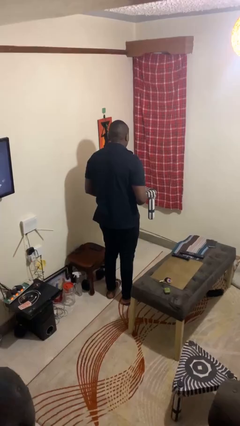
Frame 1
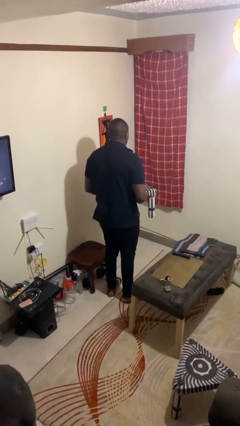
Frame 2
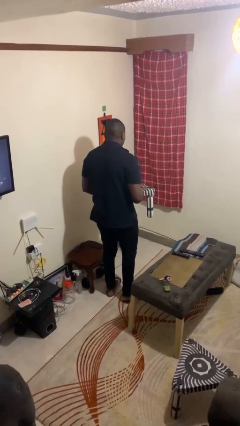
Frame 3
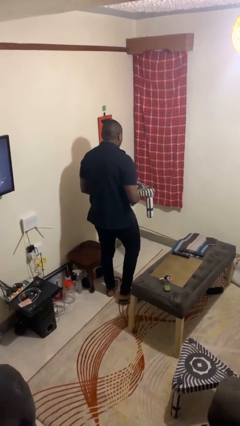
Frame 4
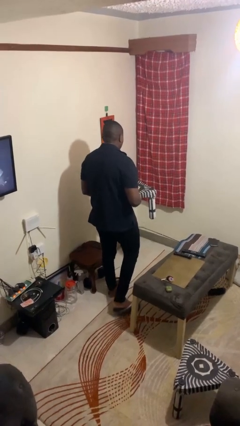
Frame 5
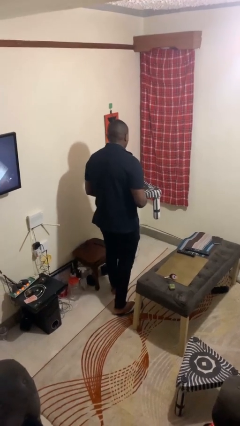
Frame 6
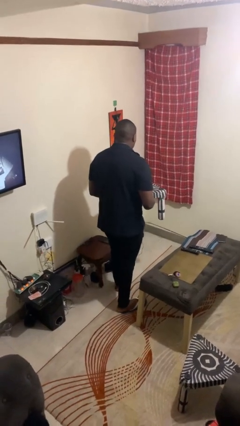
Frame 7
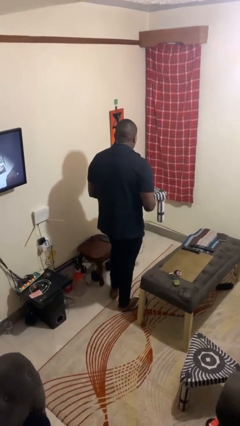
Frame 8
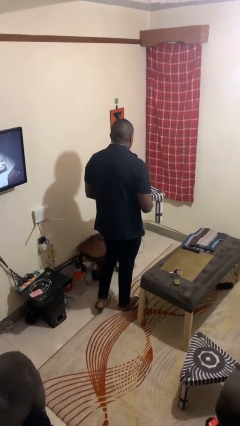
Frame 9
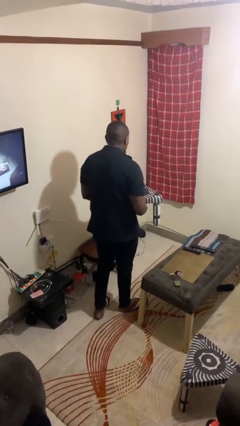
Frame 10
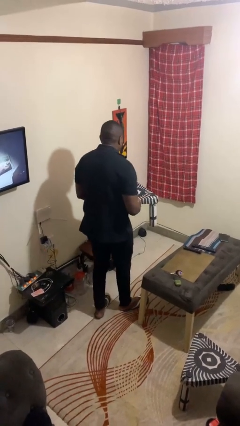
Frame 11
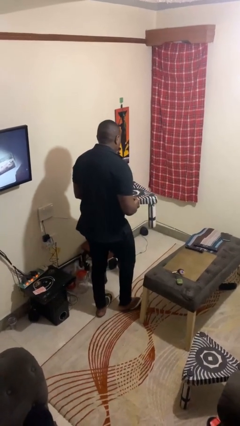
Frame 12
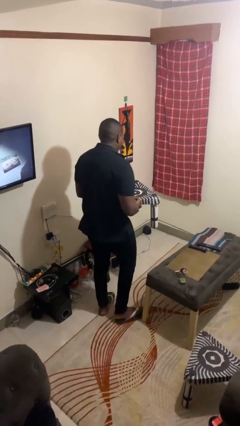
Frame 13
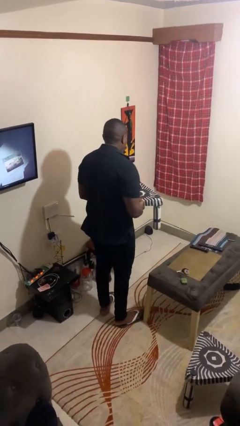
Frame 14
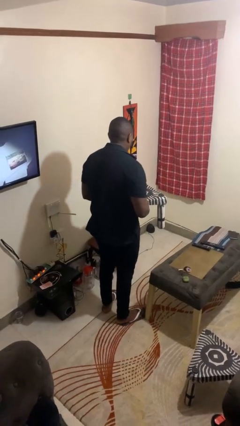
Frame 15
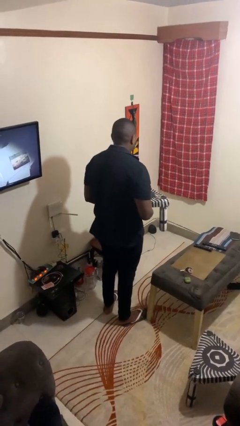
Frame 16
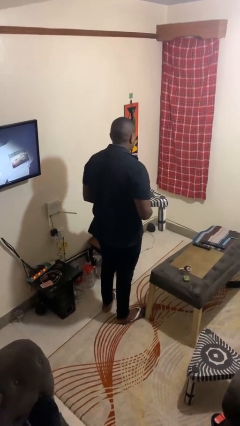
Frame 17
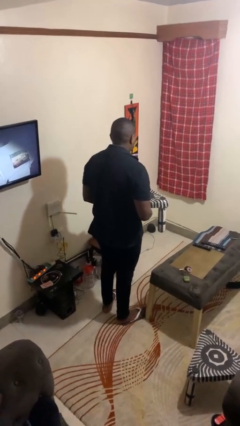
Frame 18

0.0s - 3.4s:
person carries groceries

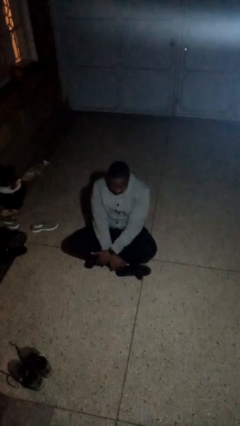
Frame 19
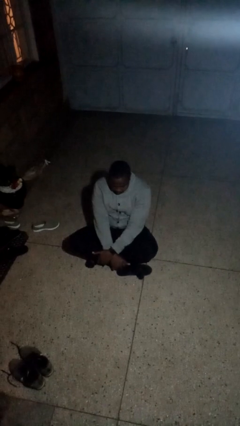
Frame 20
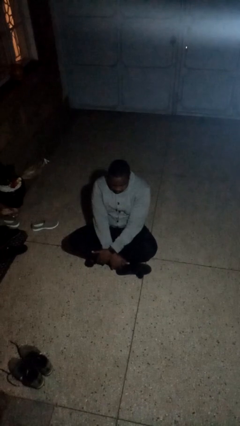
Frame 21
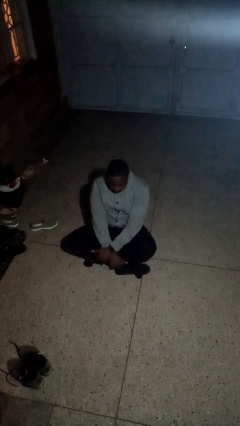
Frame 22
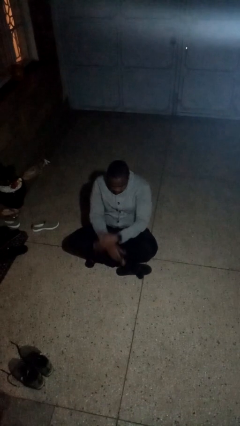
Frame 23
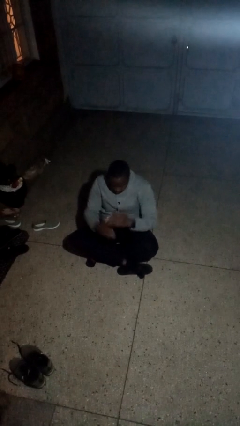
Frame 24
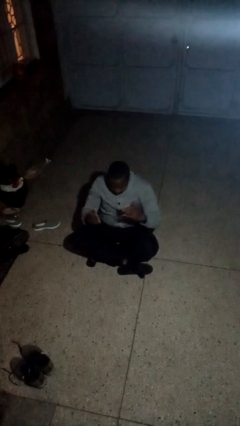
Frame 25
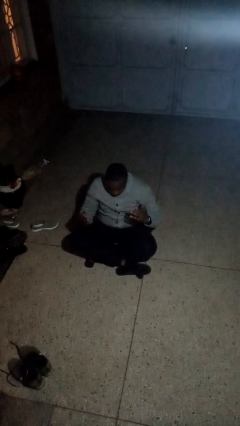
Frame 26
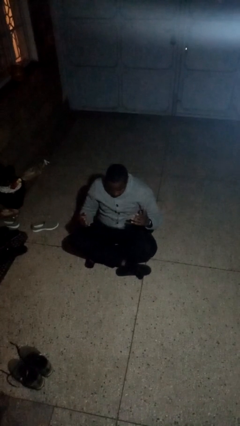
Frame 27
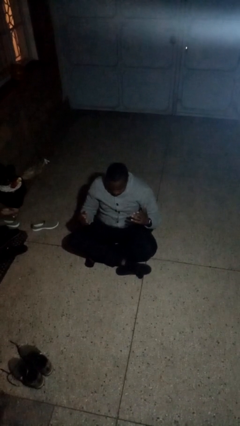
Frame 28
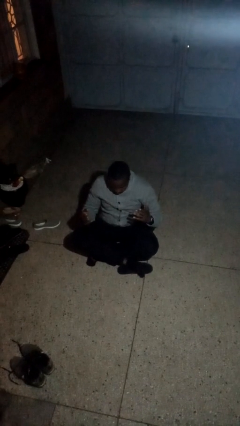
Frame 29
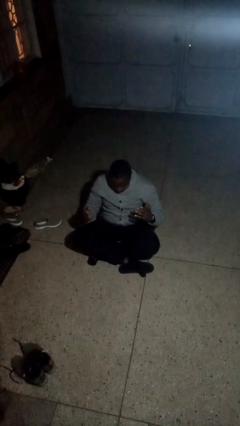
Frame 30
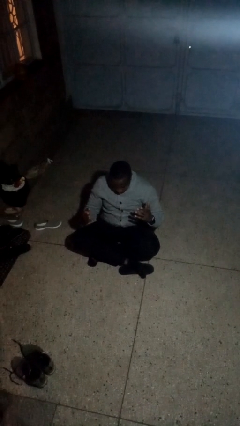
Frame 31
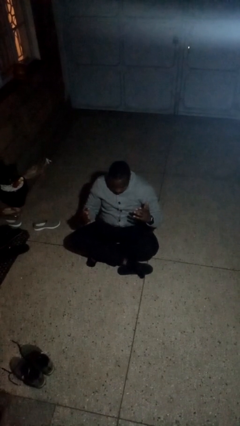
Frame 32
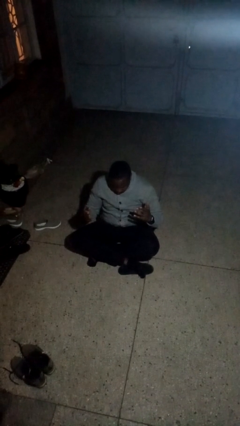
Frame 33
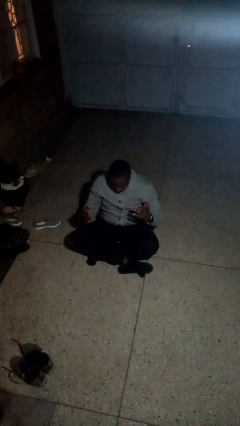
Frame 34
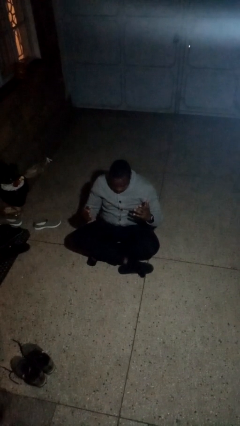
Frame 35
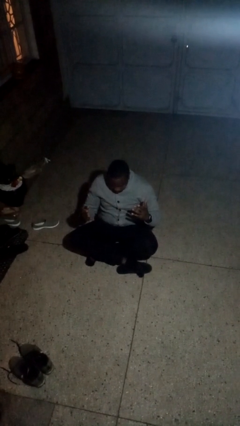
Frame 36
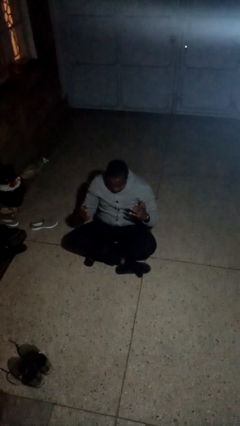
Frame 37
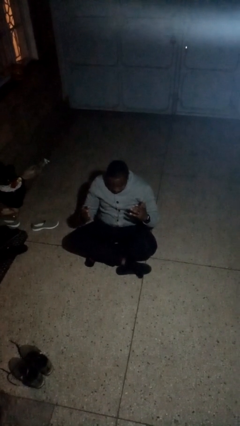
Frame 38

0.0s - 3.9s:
person prays

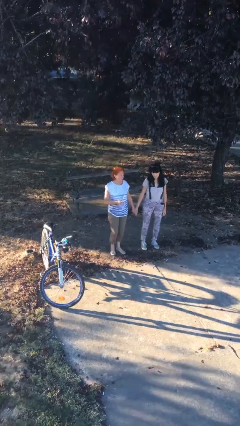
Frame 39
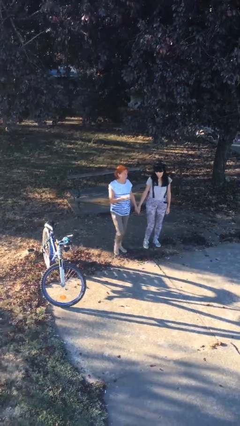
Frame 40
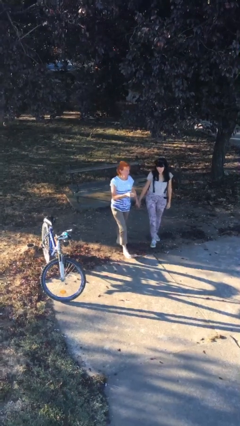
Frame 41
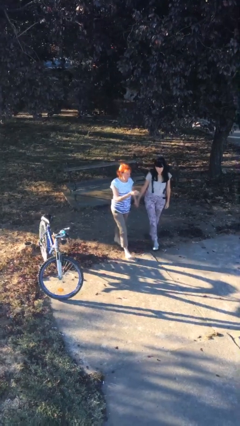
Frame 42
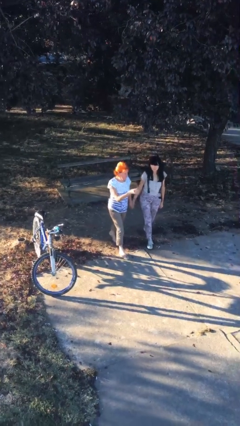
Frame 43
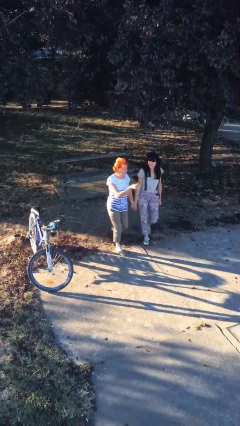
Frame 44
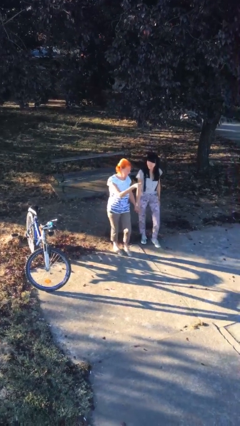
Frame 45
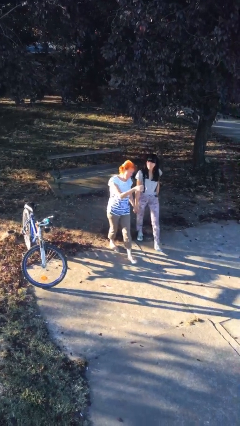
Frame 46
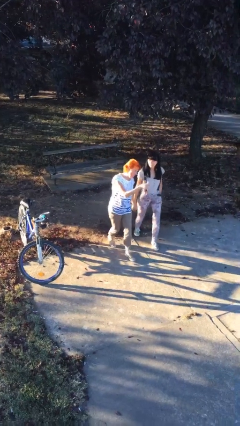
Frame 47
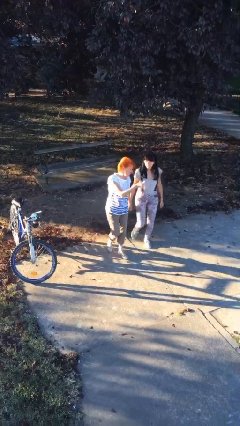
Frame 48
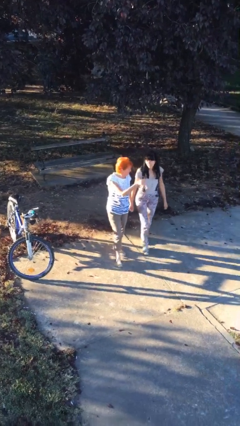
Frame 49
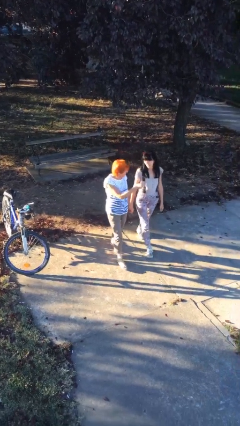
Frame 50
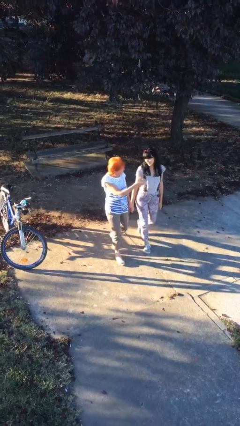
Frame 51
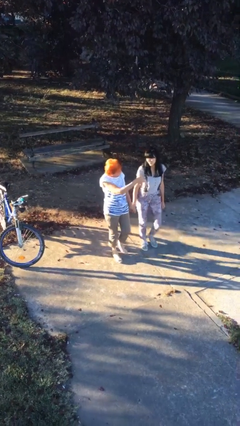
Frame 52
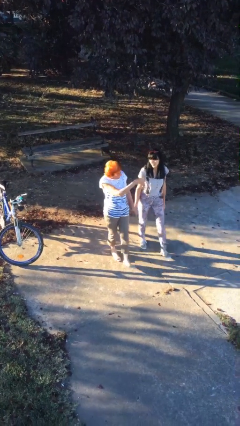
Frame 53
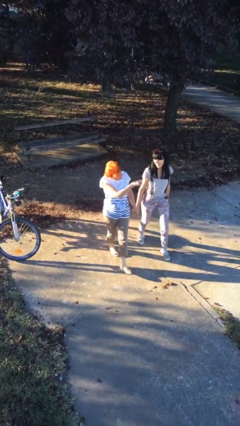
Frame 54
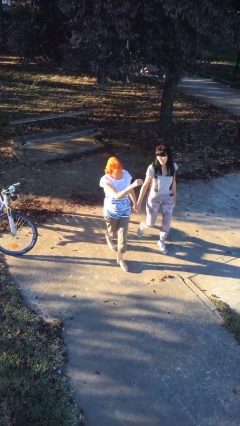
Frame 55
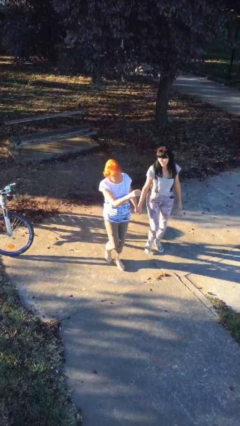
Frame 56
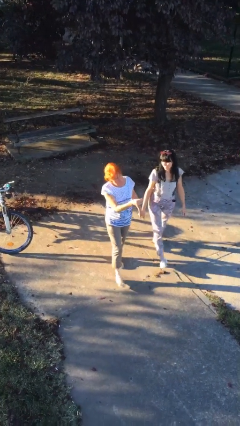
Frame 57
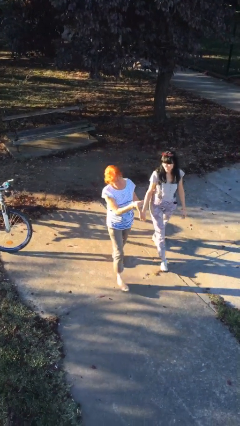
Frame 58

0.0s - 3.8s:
person holds hand

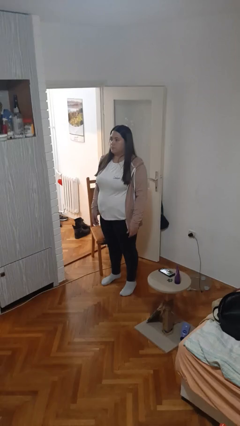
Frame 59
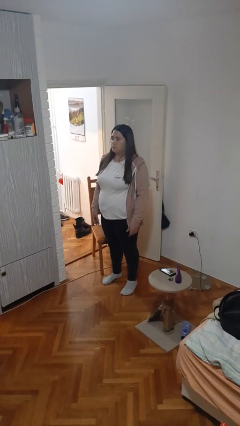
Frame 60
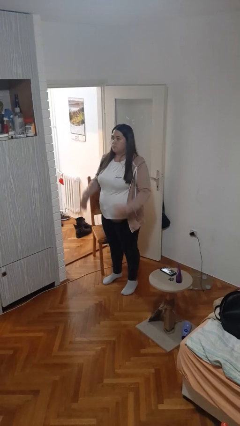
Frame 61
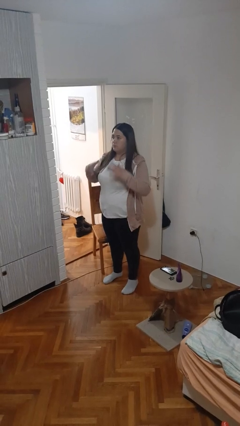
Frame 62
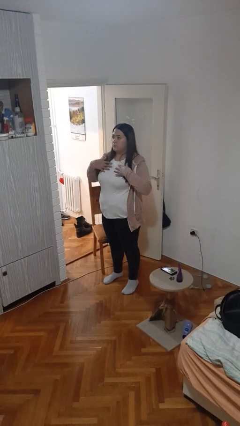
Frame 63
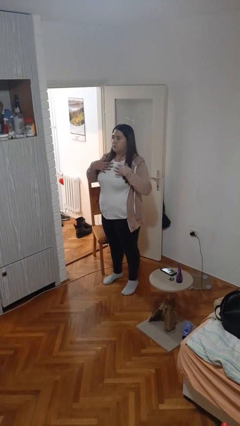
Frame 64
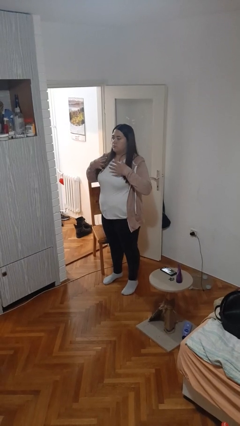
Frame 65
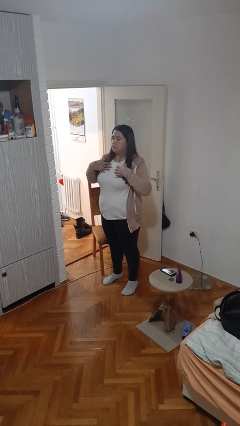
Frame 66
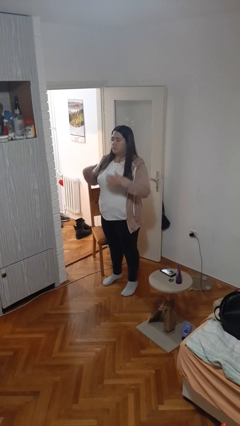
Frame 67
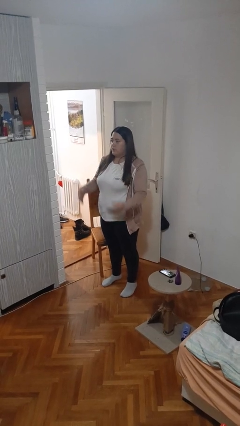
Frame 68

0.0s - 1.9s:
person drums on chest

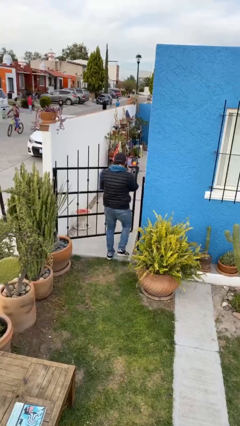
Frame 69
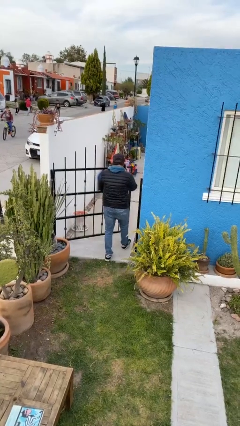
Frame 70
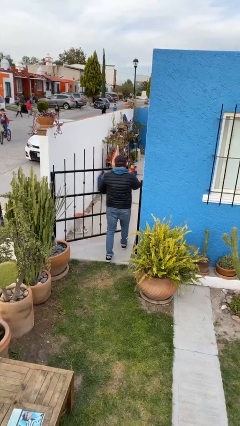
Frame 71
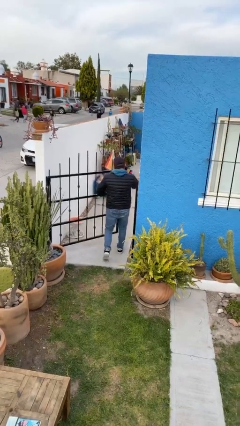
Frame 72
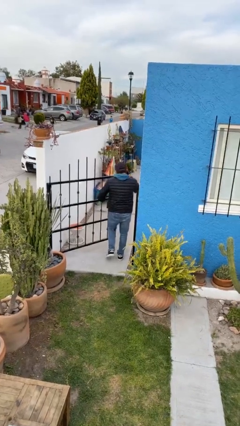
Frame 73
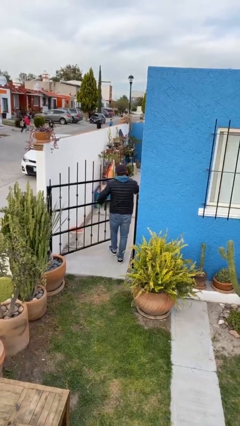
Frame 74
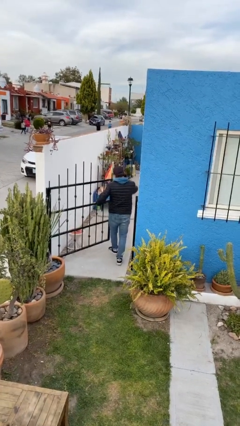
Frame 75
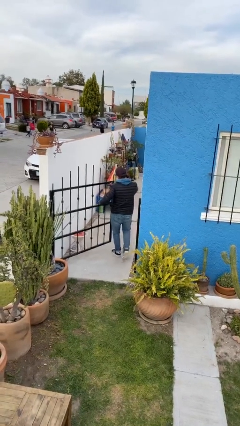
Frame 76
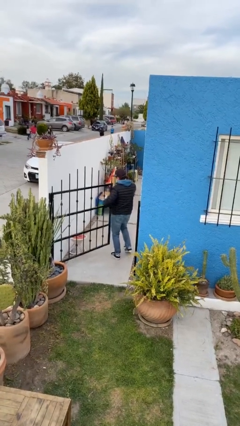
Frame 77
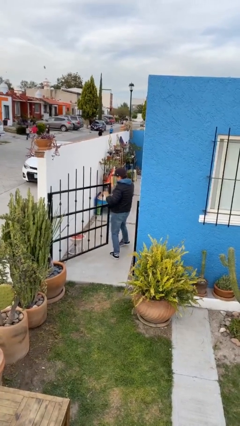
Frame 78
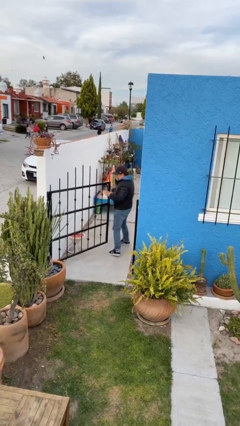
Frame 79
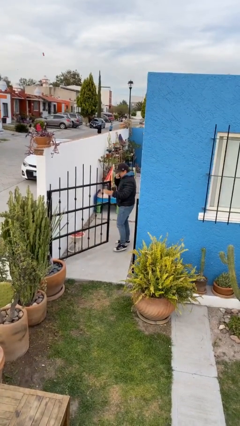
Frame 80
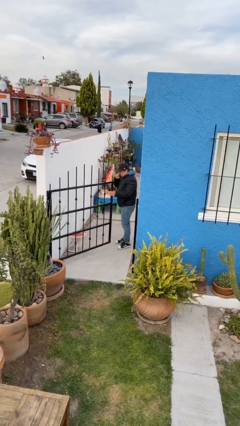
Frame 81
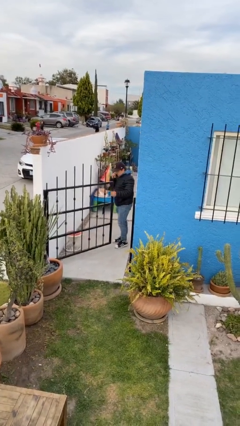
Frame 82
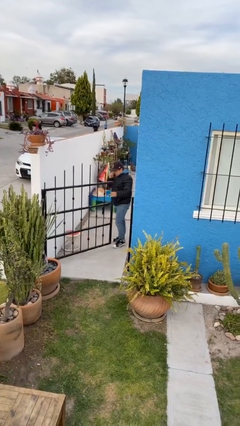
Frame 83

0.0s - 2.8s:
person exits scene through structure

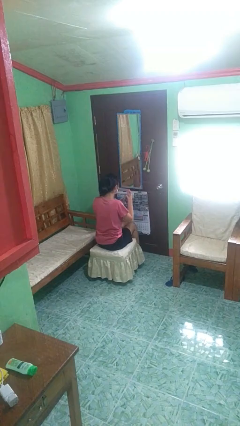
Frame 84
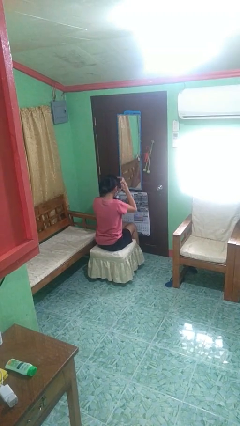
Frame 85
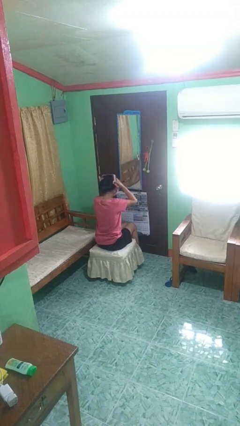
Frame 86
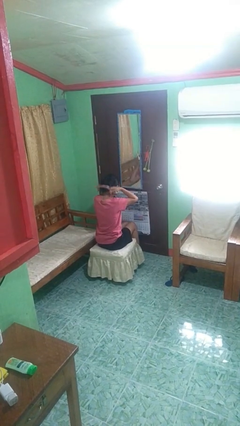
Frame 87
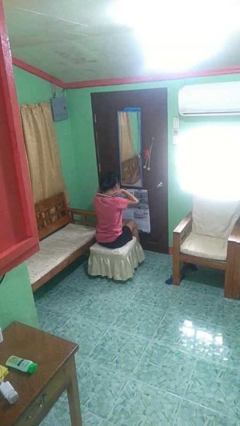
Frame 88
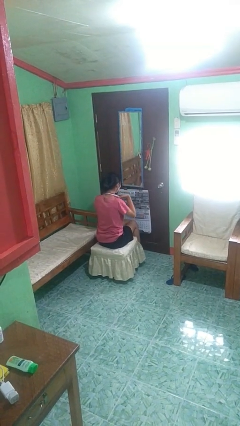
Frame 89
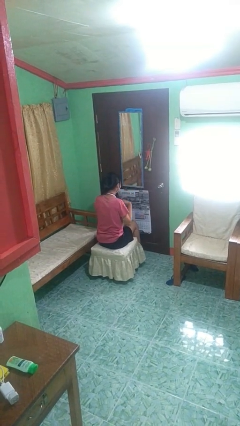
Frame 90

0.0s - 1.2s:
person puts on necklace

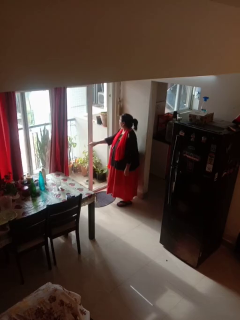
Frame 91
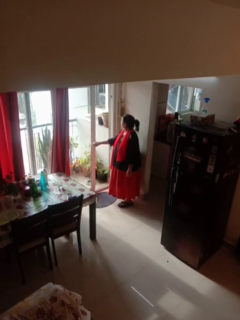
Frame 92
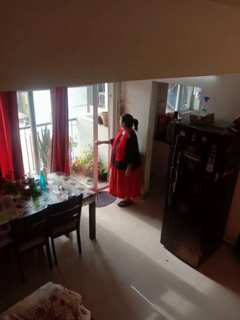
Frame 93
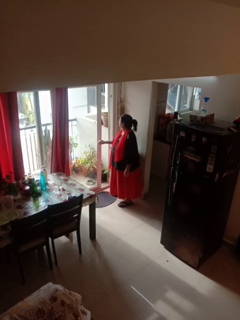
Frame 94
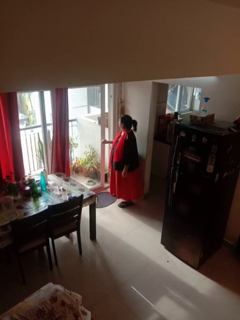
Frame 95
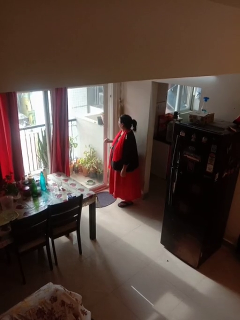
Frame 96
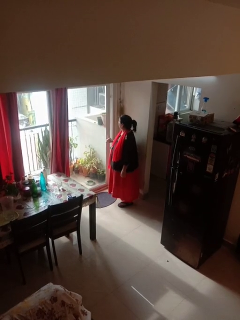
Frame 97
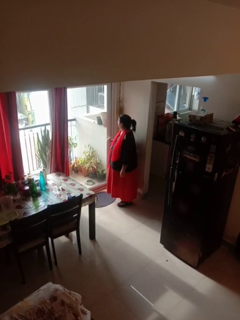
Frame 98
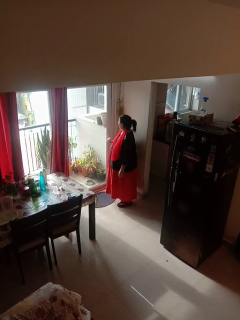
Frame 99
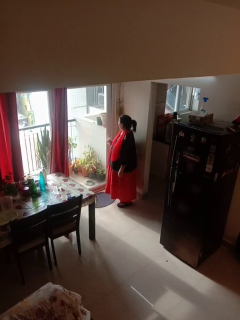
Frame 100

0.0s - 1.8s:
person closes home window
